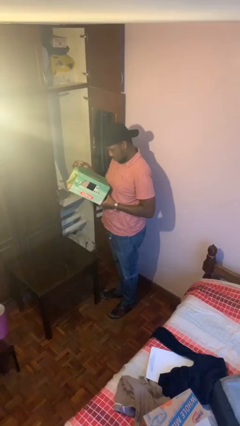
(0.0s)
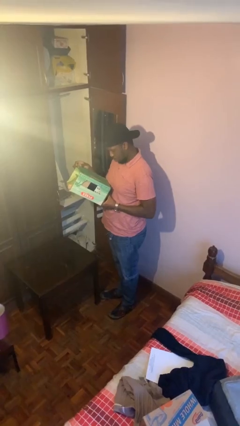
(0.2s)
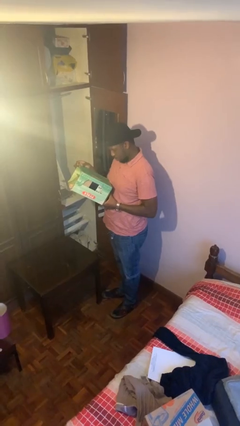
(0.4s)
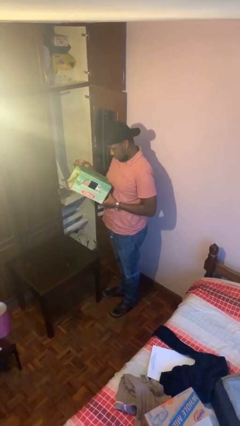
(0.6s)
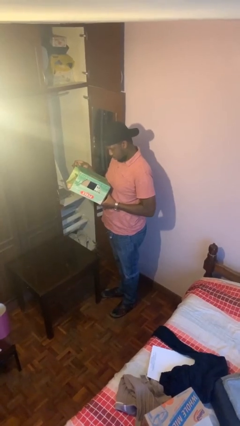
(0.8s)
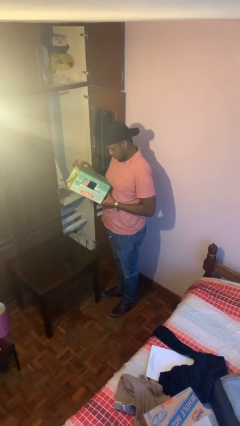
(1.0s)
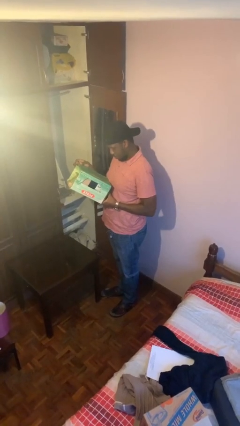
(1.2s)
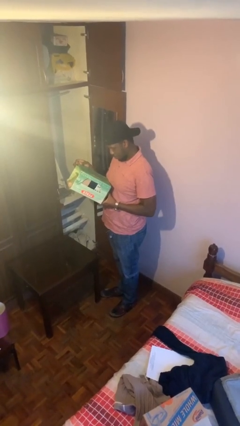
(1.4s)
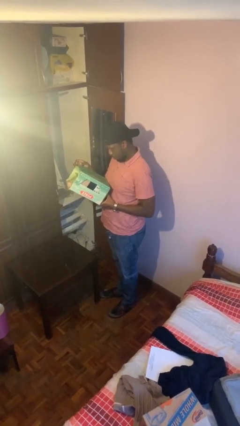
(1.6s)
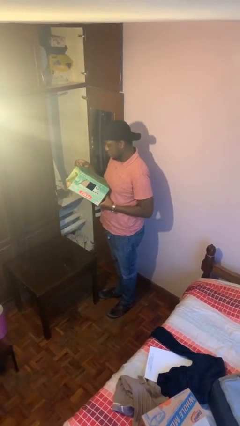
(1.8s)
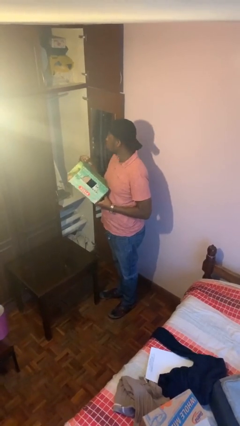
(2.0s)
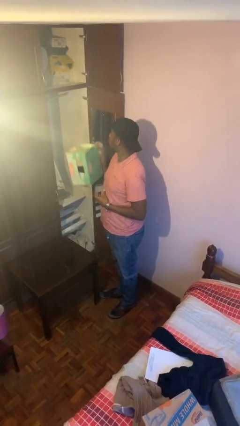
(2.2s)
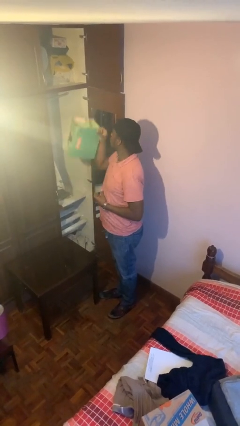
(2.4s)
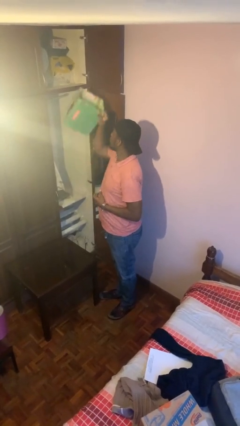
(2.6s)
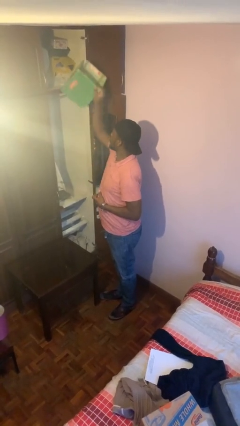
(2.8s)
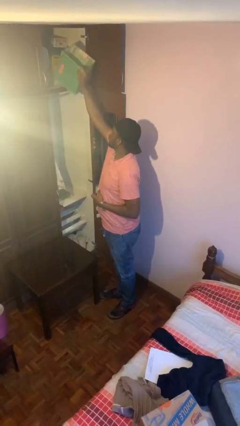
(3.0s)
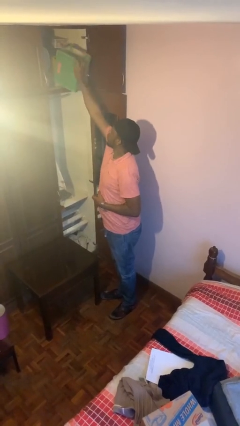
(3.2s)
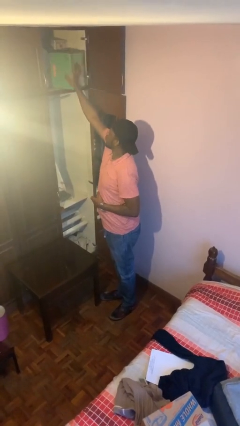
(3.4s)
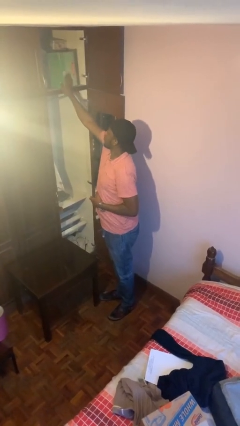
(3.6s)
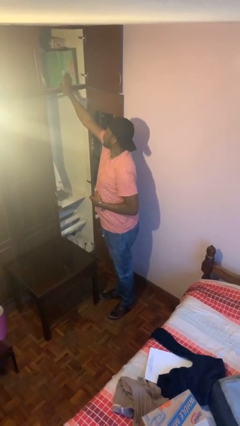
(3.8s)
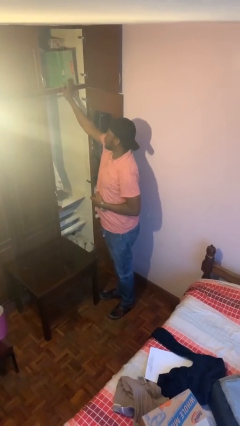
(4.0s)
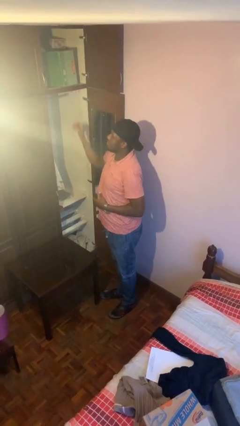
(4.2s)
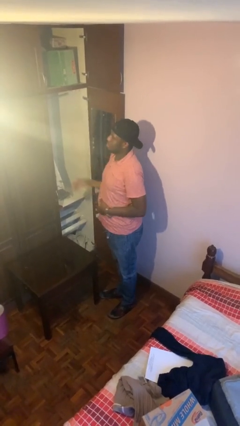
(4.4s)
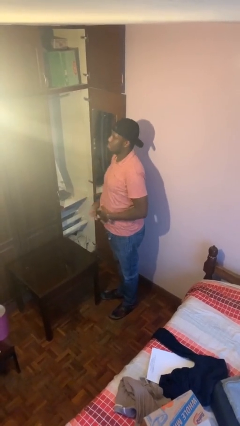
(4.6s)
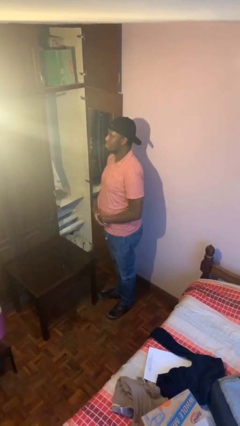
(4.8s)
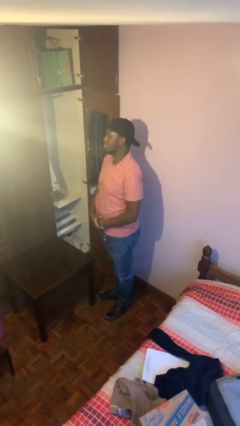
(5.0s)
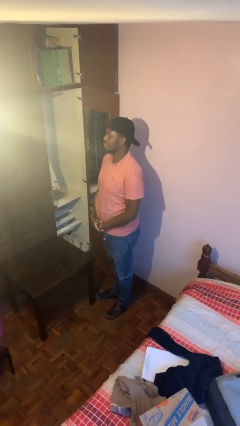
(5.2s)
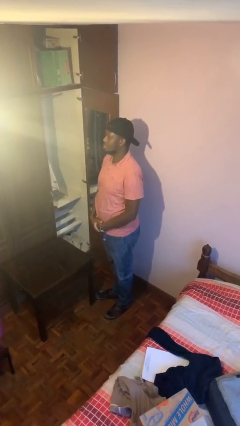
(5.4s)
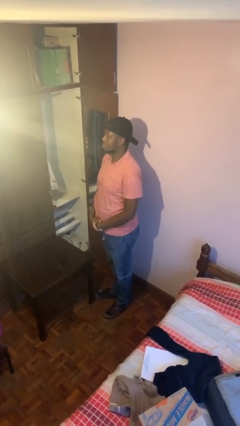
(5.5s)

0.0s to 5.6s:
person puts down object on shelf

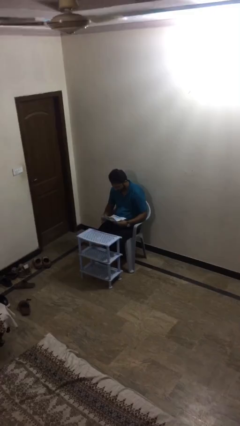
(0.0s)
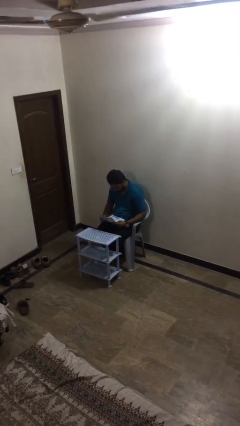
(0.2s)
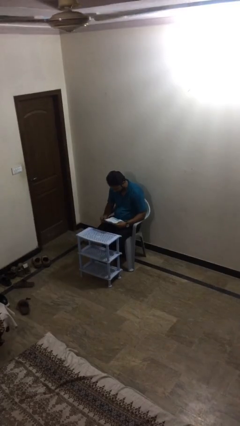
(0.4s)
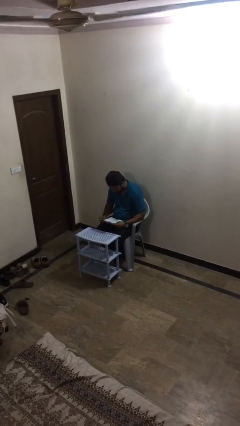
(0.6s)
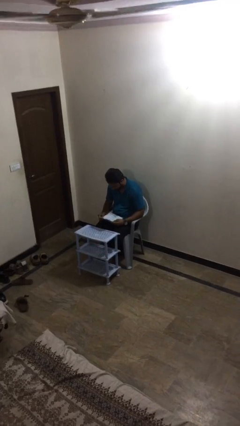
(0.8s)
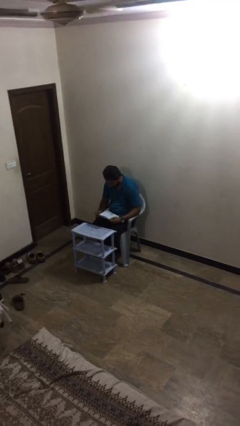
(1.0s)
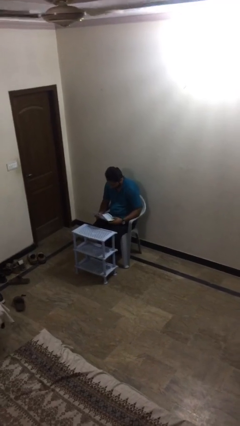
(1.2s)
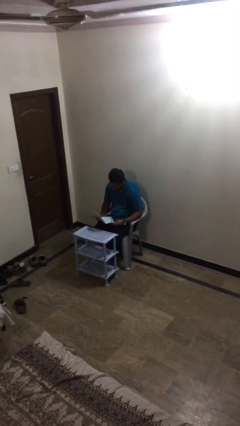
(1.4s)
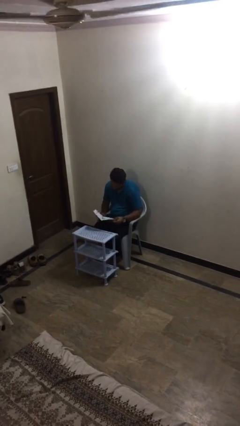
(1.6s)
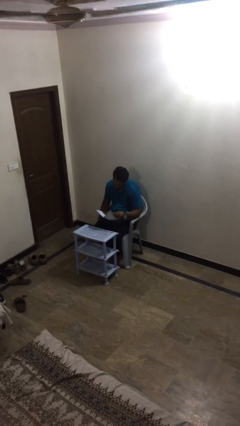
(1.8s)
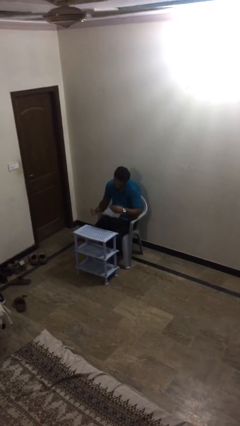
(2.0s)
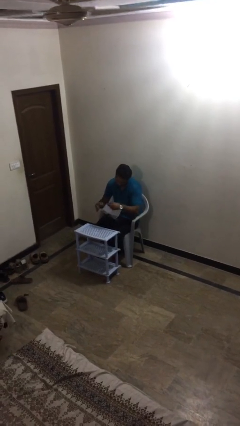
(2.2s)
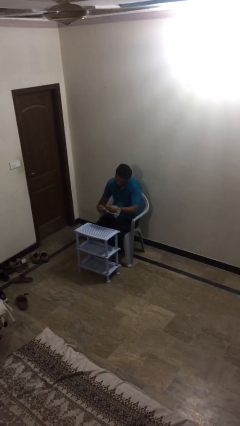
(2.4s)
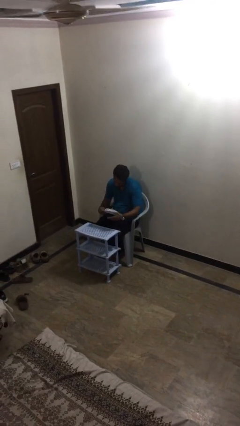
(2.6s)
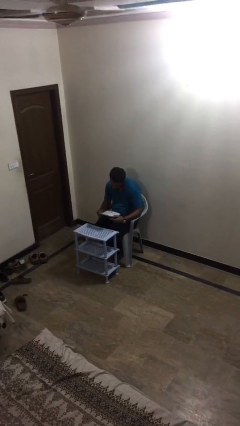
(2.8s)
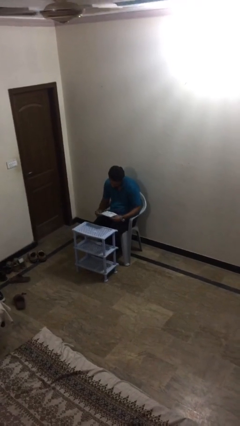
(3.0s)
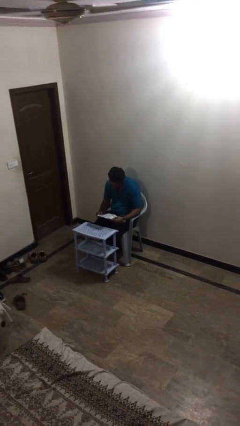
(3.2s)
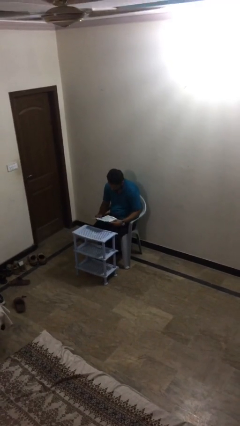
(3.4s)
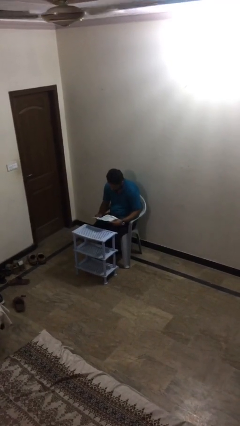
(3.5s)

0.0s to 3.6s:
person reads document

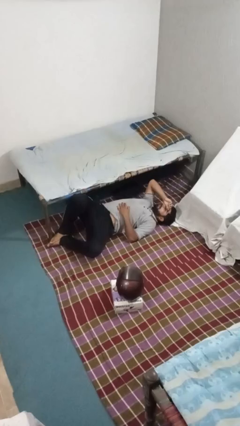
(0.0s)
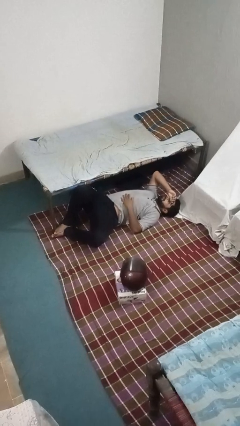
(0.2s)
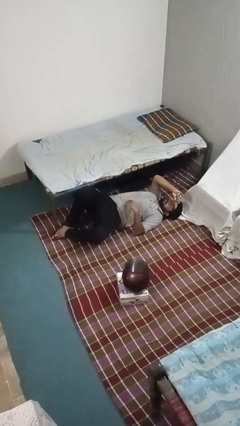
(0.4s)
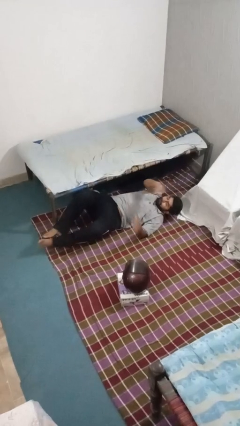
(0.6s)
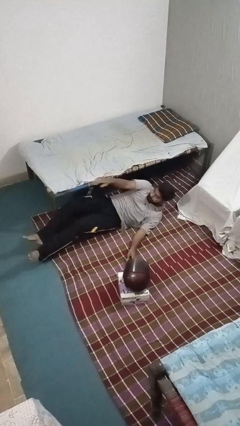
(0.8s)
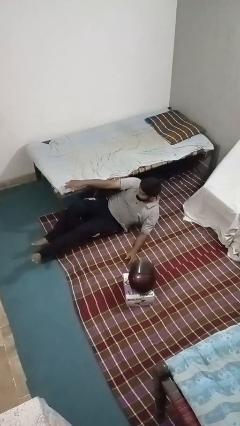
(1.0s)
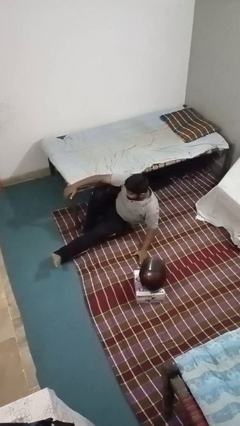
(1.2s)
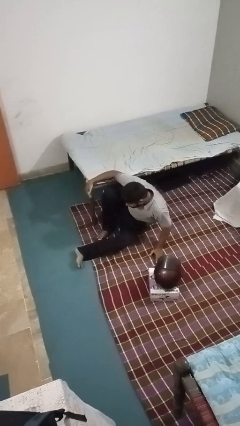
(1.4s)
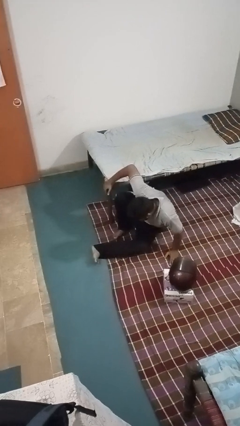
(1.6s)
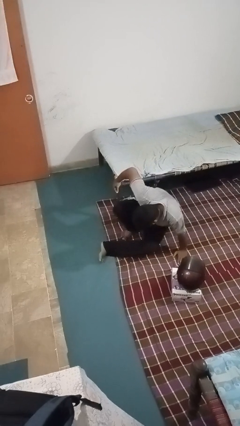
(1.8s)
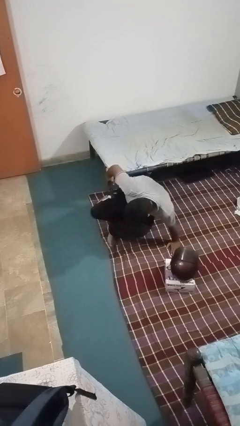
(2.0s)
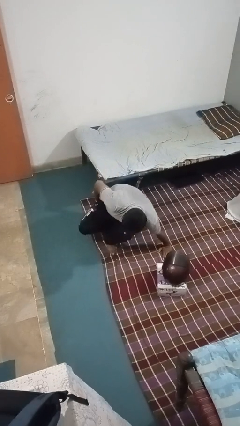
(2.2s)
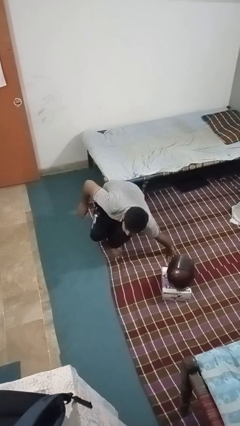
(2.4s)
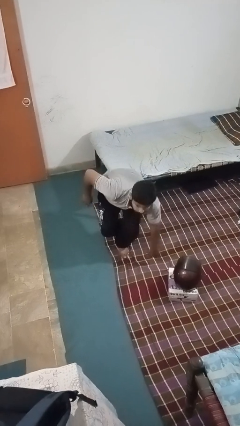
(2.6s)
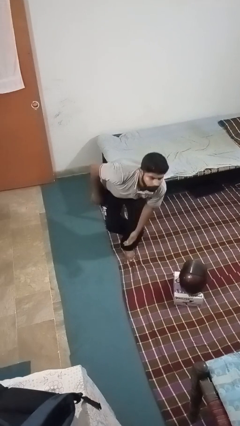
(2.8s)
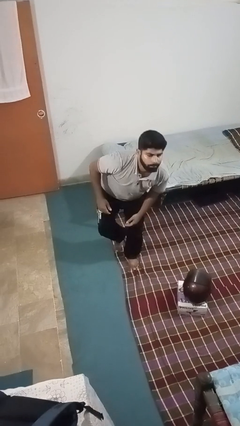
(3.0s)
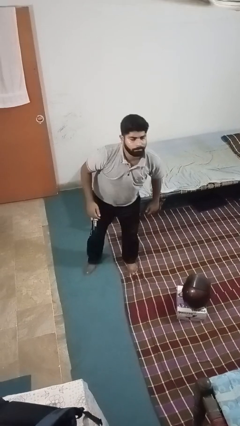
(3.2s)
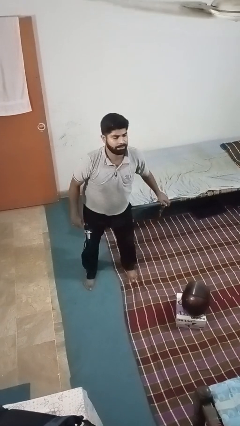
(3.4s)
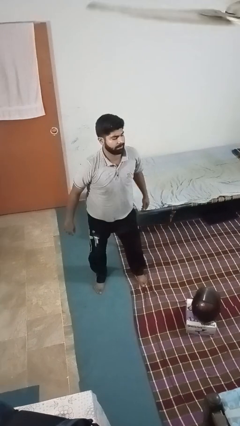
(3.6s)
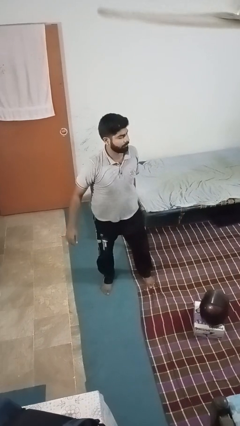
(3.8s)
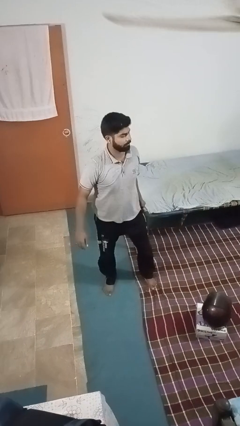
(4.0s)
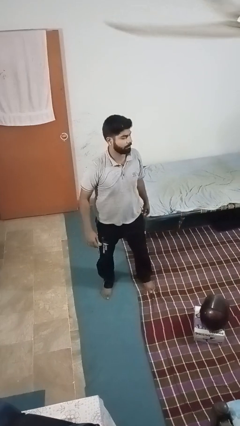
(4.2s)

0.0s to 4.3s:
person stands up from floor

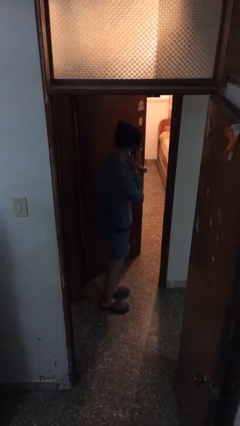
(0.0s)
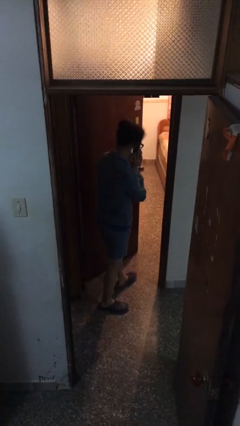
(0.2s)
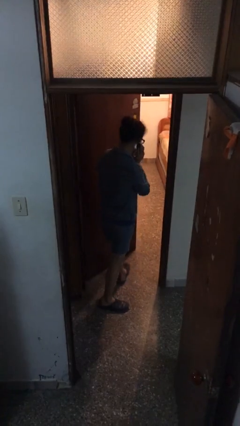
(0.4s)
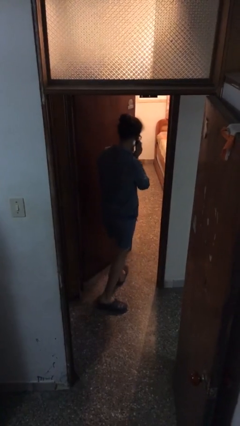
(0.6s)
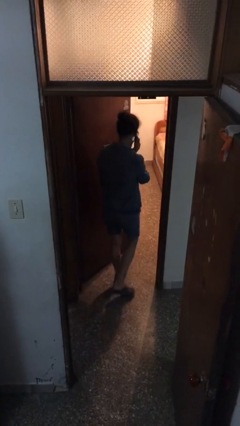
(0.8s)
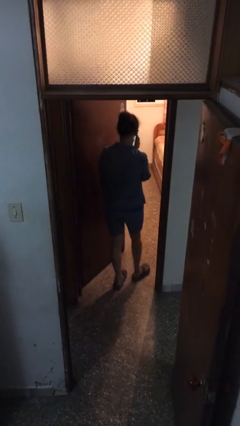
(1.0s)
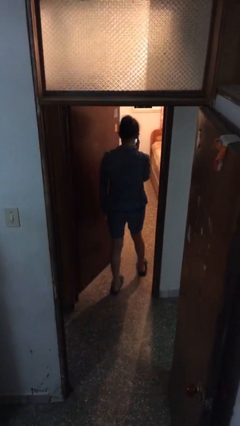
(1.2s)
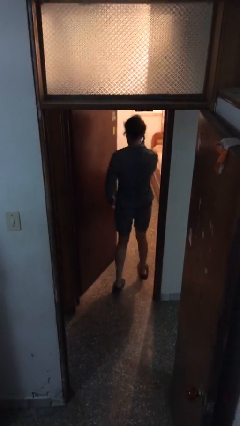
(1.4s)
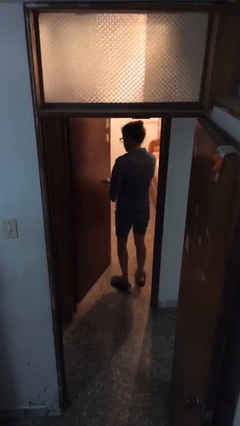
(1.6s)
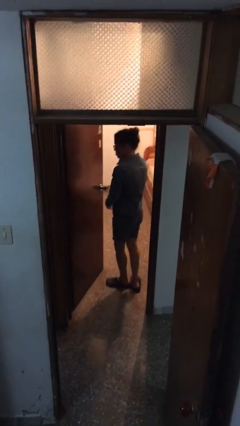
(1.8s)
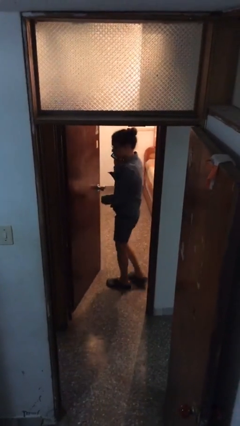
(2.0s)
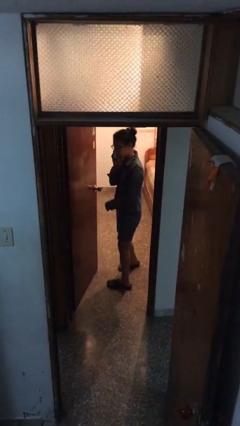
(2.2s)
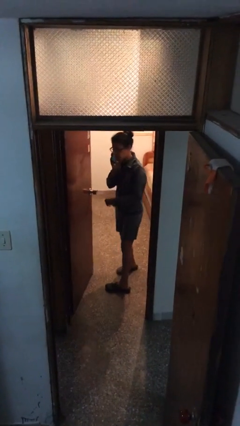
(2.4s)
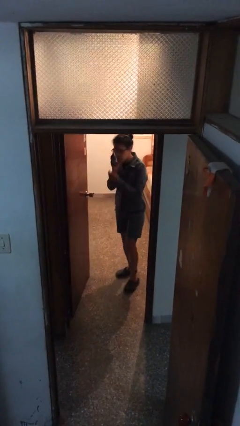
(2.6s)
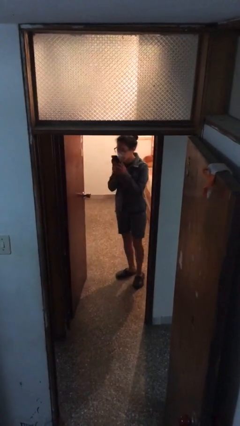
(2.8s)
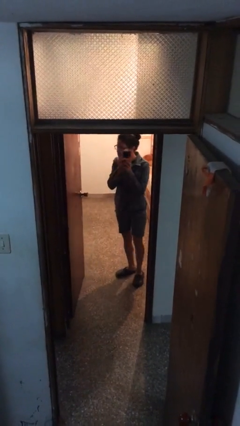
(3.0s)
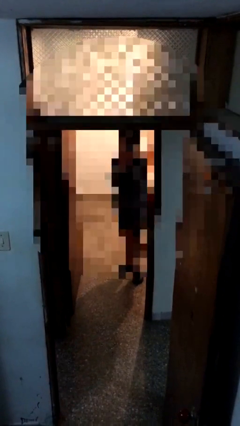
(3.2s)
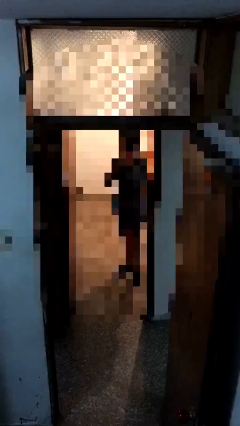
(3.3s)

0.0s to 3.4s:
person exits scene through structure

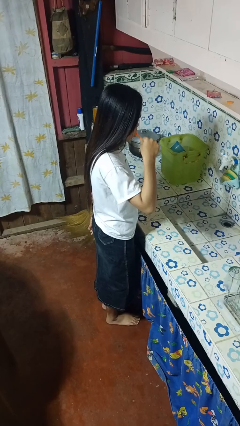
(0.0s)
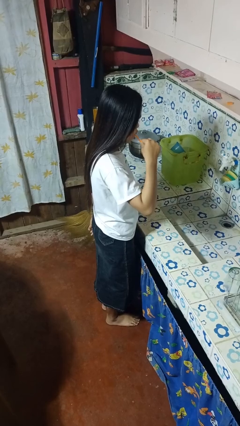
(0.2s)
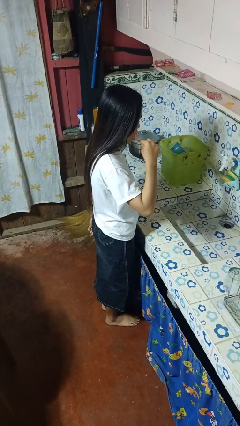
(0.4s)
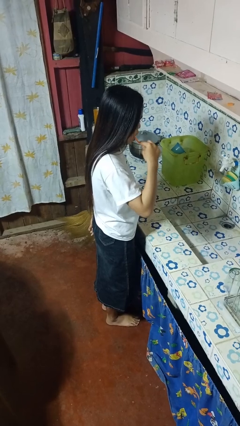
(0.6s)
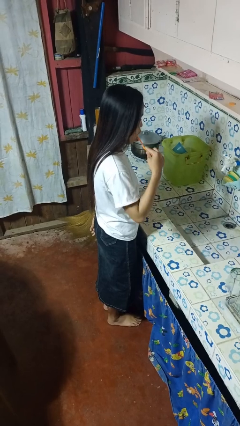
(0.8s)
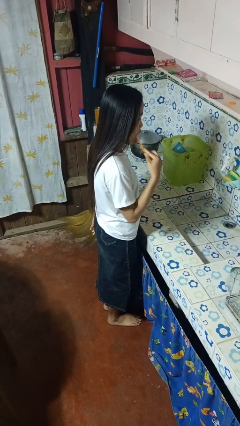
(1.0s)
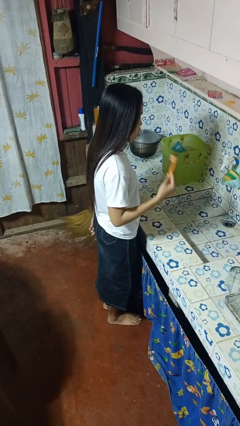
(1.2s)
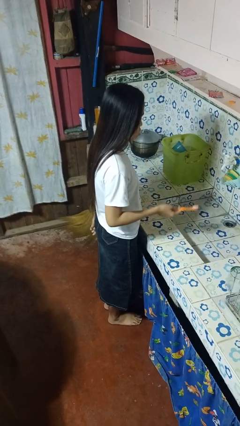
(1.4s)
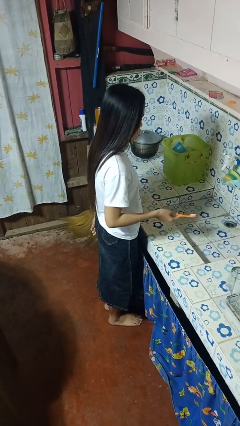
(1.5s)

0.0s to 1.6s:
person brushes teeth
